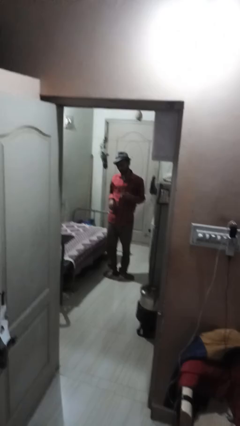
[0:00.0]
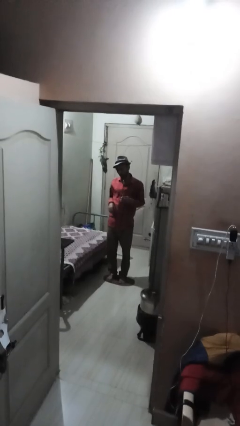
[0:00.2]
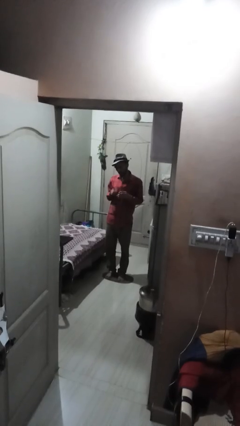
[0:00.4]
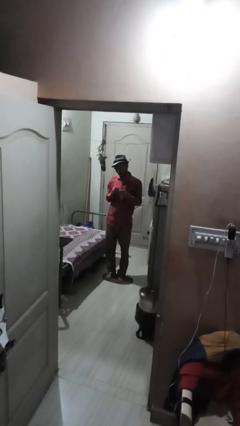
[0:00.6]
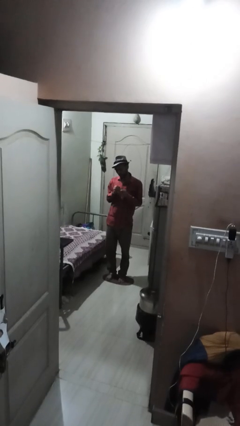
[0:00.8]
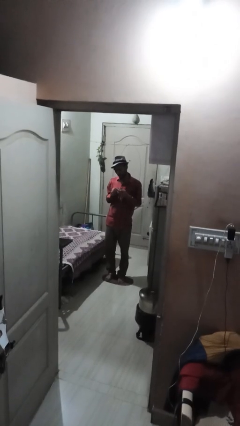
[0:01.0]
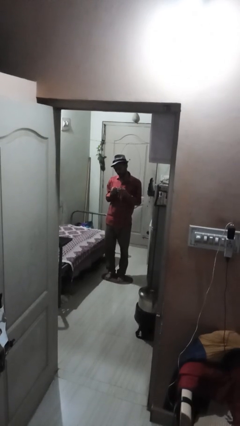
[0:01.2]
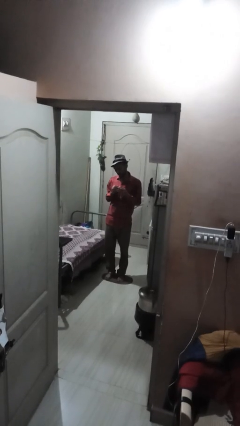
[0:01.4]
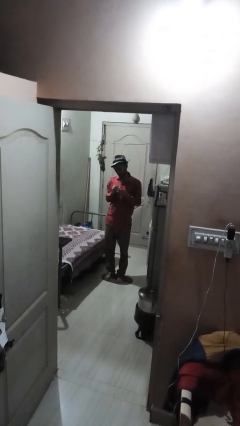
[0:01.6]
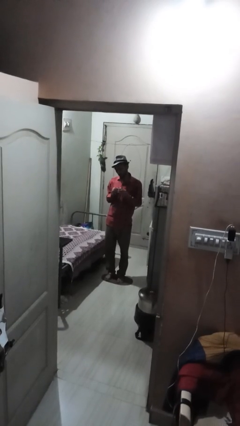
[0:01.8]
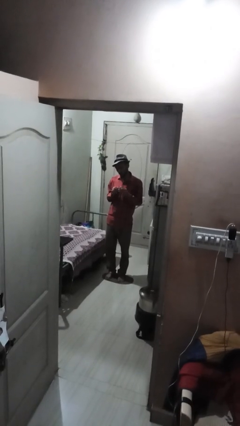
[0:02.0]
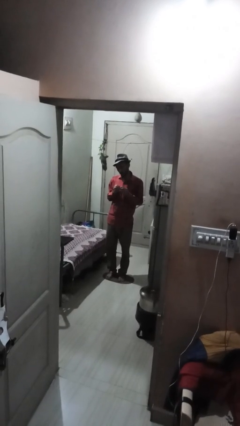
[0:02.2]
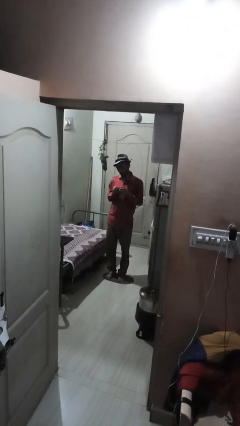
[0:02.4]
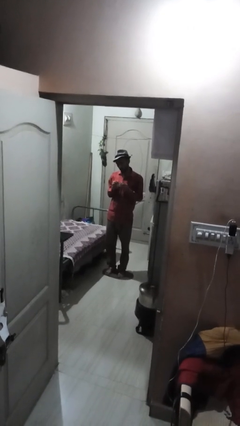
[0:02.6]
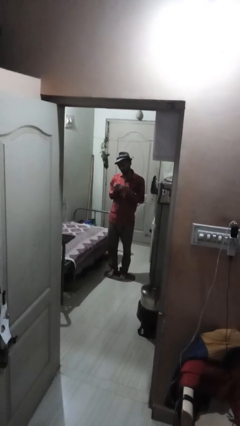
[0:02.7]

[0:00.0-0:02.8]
person files fingernails

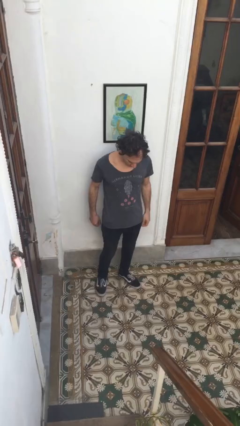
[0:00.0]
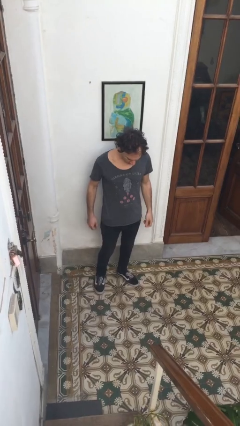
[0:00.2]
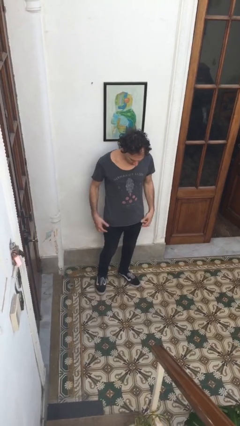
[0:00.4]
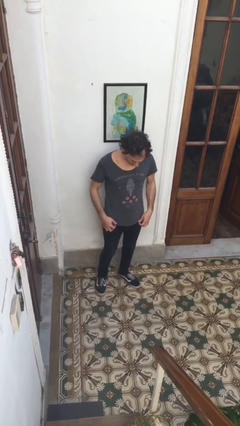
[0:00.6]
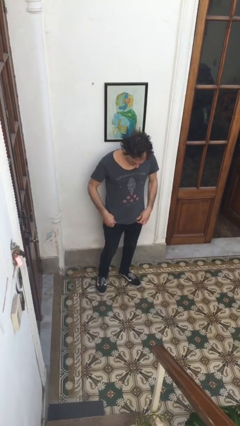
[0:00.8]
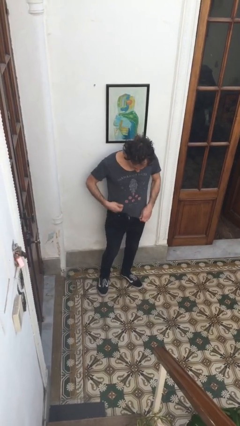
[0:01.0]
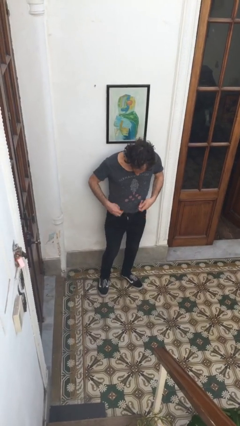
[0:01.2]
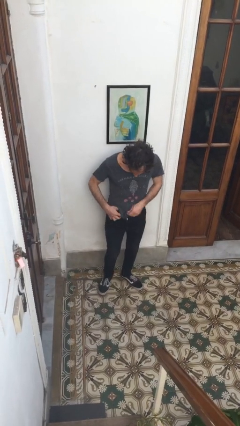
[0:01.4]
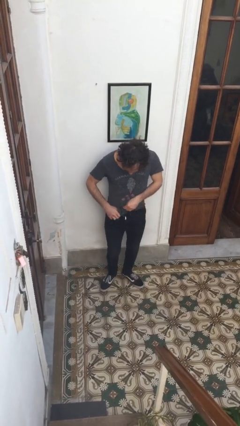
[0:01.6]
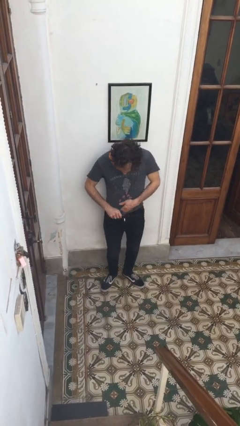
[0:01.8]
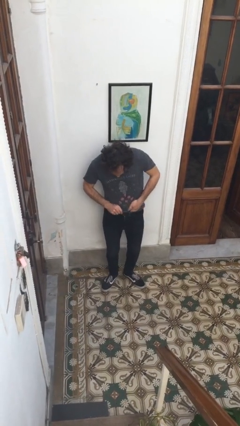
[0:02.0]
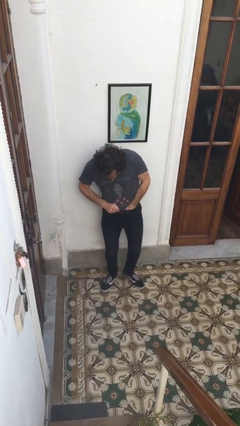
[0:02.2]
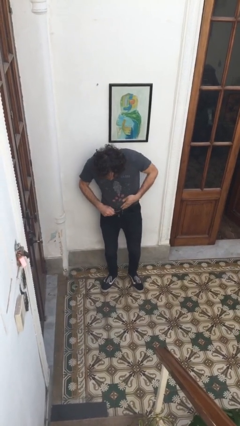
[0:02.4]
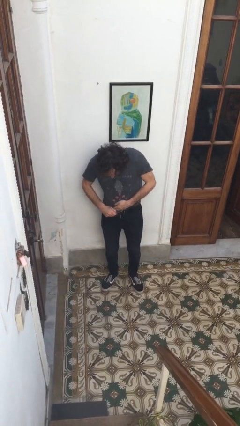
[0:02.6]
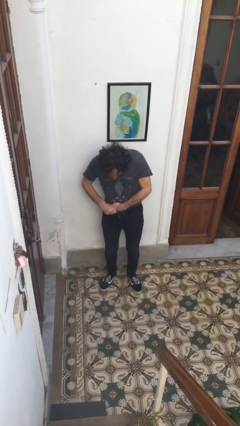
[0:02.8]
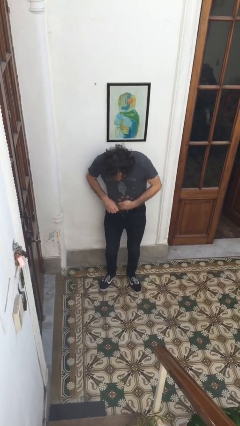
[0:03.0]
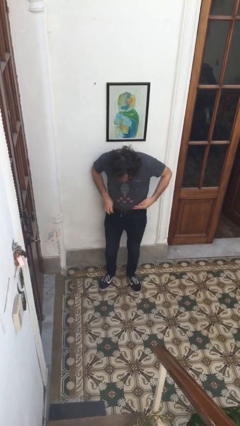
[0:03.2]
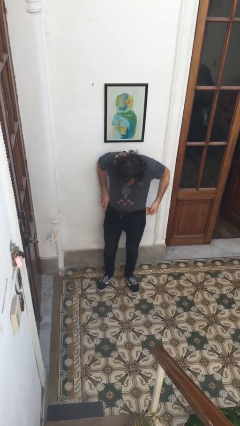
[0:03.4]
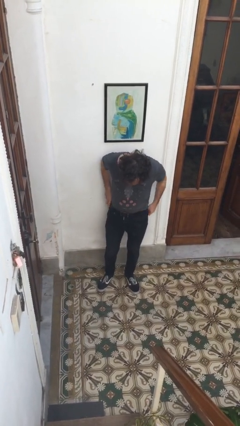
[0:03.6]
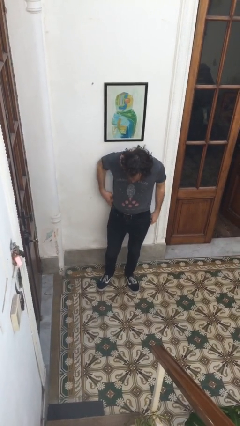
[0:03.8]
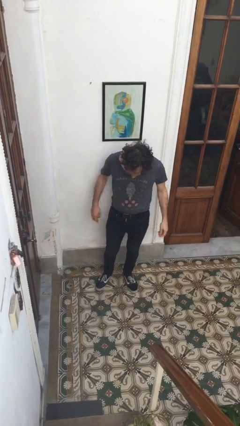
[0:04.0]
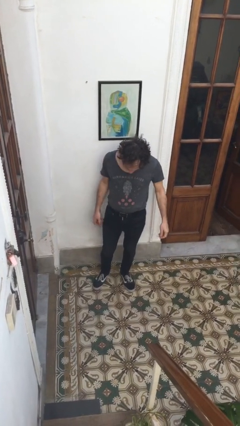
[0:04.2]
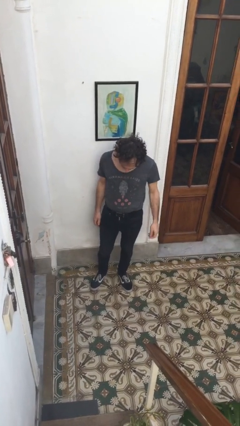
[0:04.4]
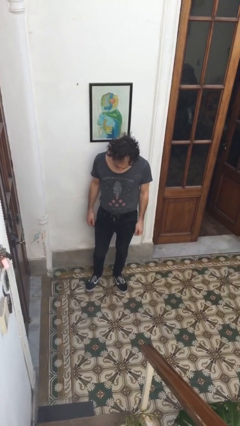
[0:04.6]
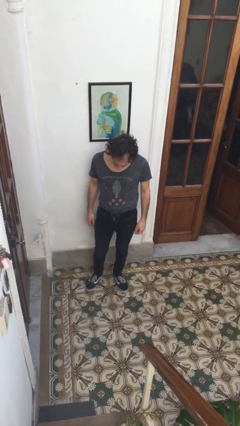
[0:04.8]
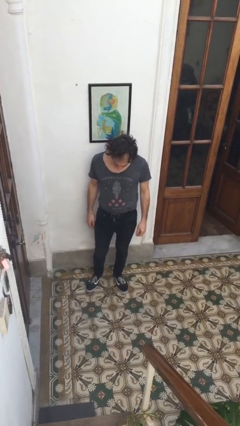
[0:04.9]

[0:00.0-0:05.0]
person tucks in shirt

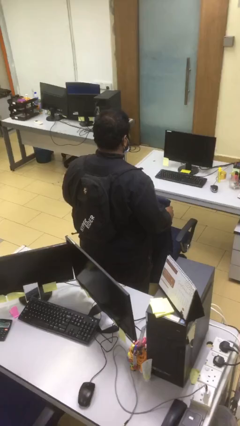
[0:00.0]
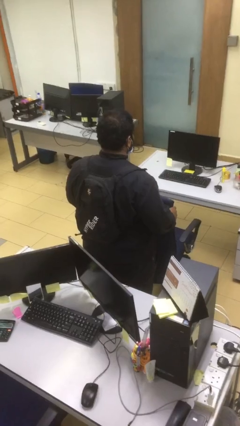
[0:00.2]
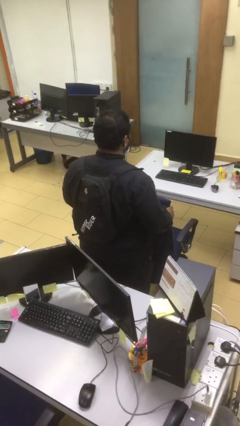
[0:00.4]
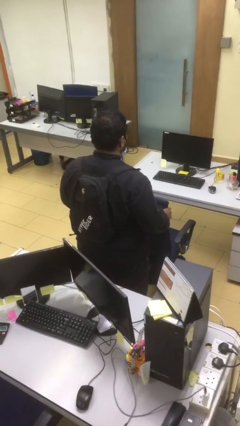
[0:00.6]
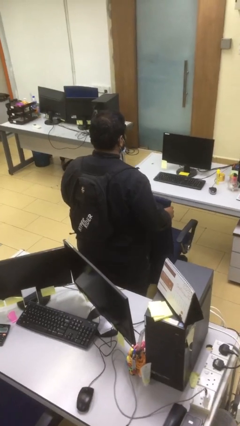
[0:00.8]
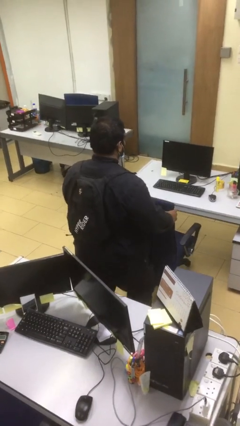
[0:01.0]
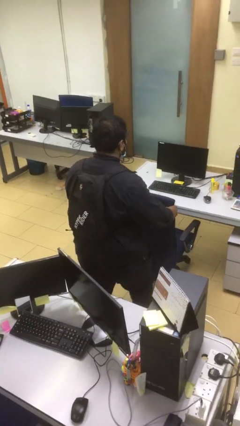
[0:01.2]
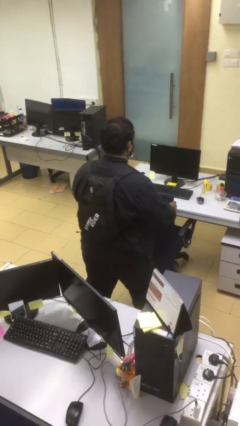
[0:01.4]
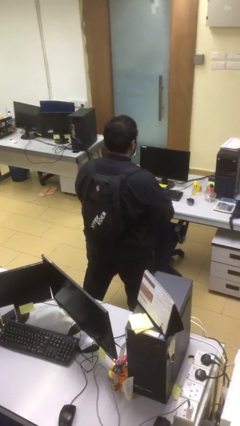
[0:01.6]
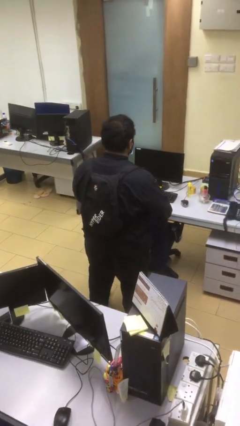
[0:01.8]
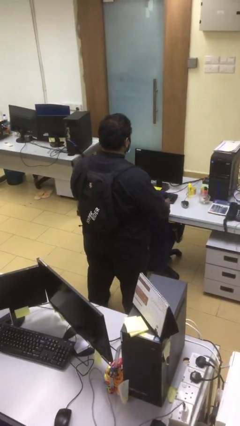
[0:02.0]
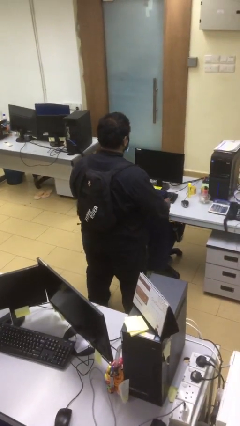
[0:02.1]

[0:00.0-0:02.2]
person pushes in chair

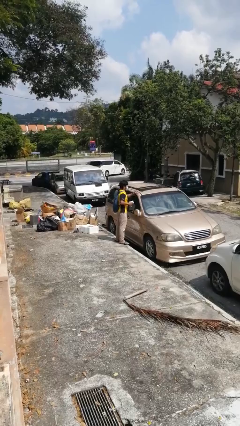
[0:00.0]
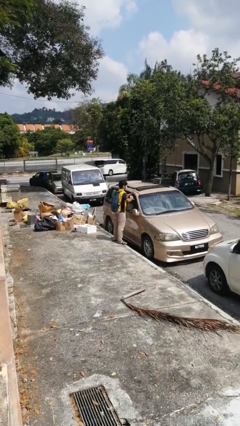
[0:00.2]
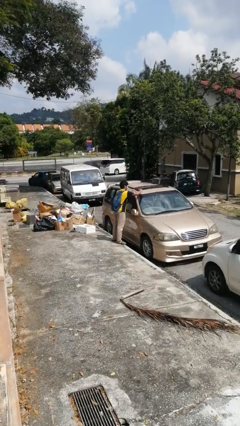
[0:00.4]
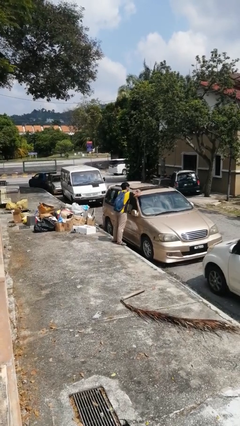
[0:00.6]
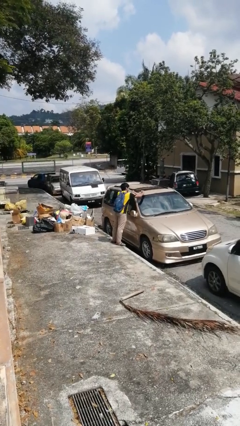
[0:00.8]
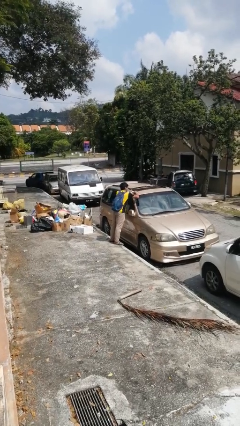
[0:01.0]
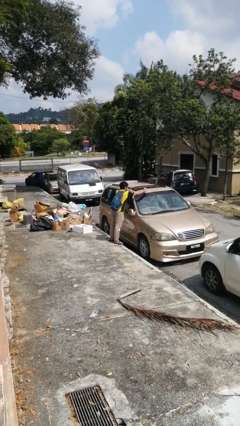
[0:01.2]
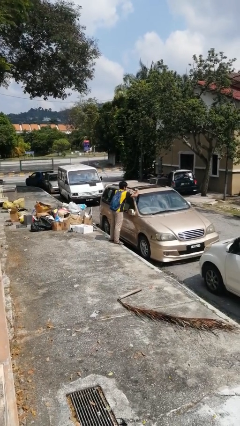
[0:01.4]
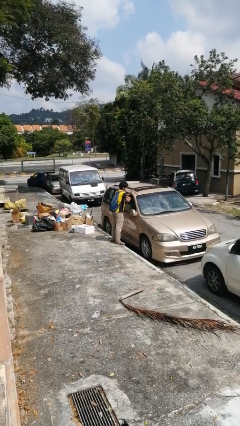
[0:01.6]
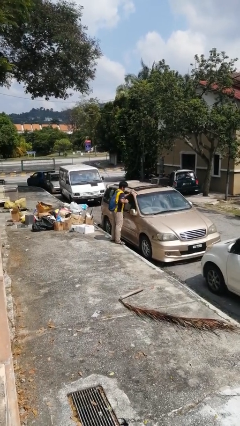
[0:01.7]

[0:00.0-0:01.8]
person polishes car with rag

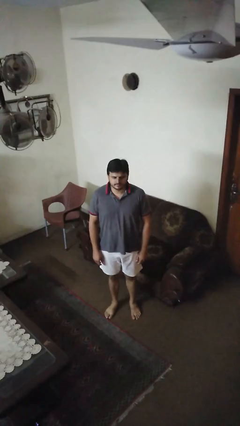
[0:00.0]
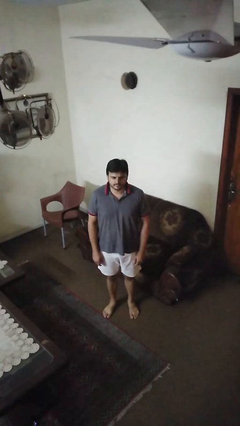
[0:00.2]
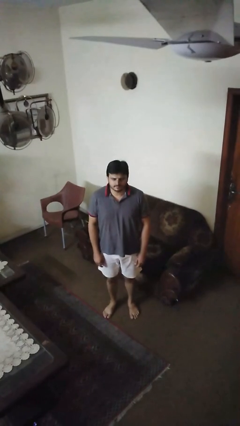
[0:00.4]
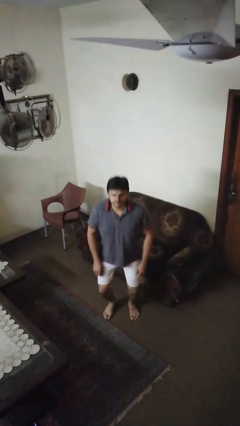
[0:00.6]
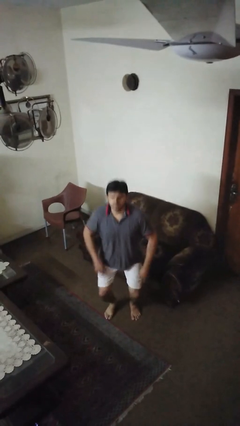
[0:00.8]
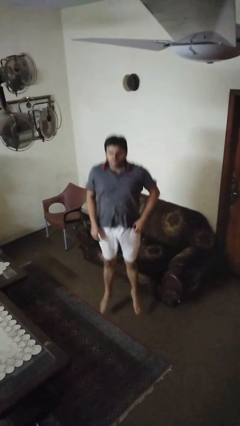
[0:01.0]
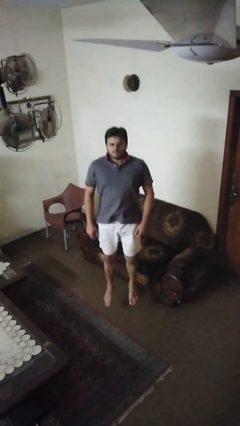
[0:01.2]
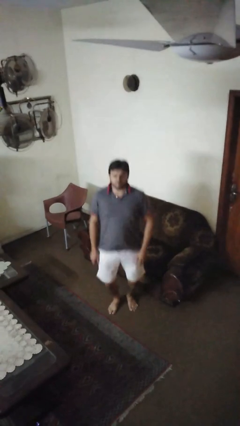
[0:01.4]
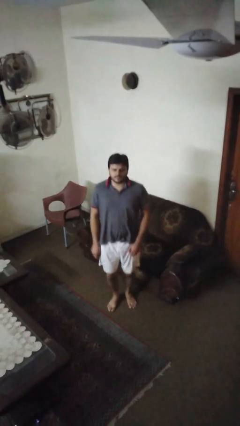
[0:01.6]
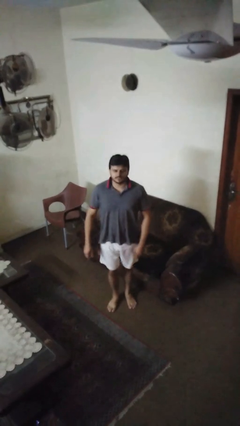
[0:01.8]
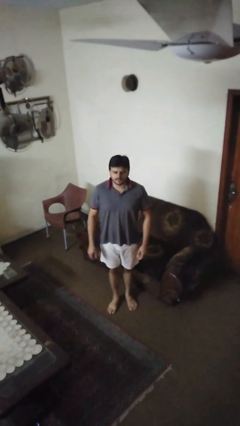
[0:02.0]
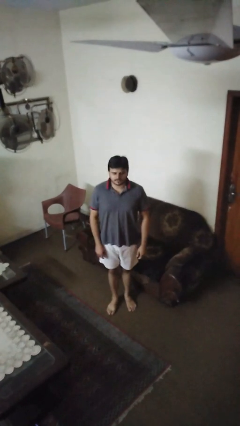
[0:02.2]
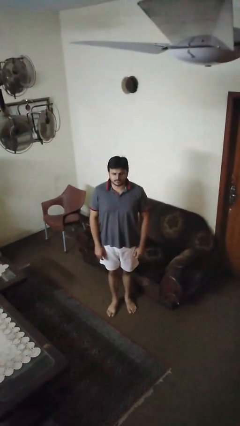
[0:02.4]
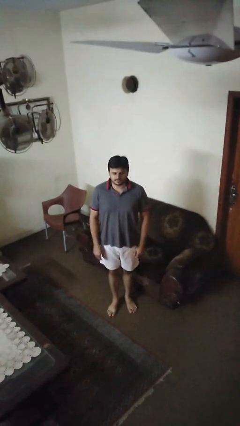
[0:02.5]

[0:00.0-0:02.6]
person jumps

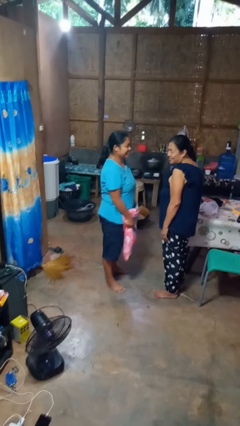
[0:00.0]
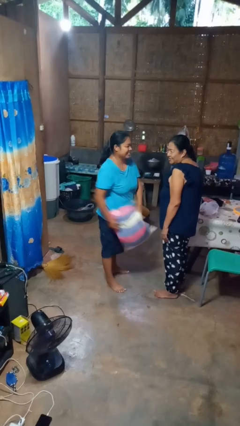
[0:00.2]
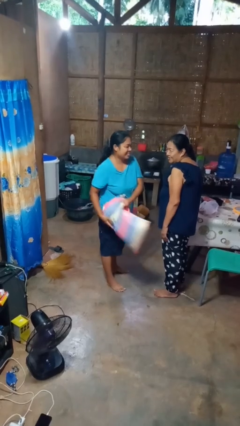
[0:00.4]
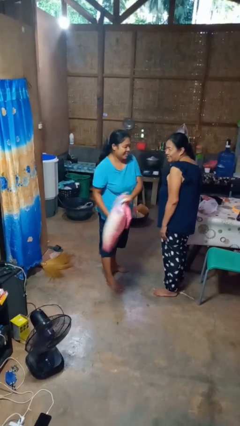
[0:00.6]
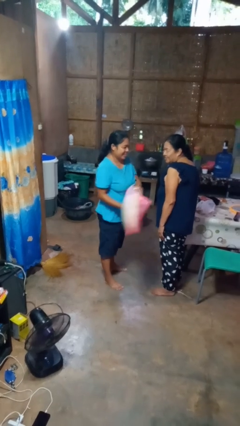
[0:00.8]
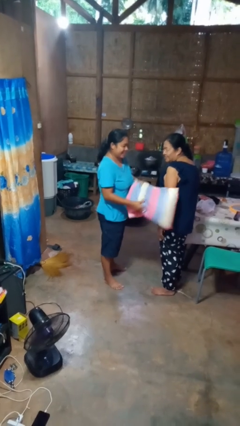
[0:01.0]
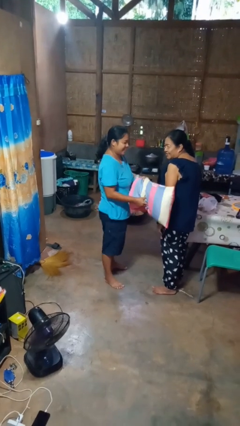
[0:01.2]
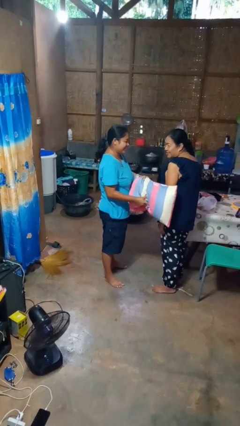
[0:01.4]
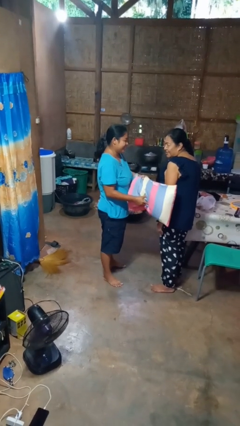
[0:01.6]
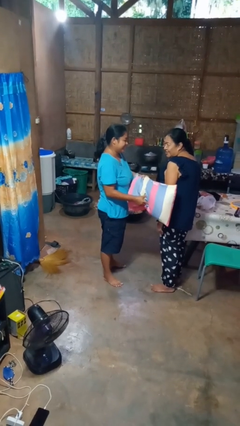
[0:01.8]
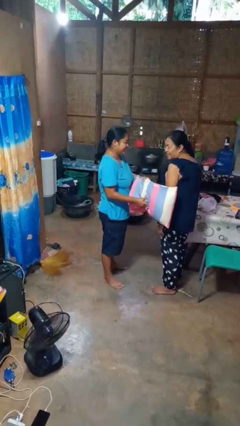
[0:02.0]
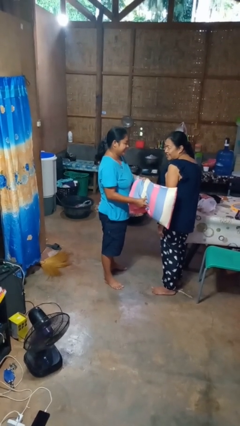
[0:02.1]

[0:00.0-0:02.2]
person hits person with pillow

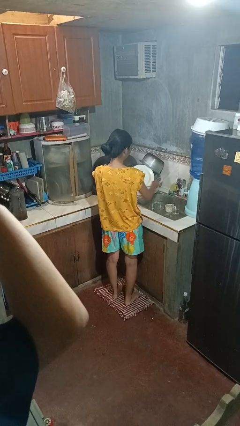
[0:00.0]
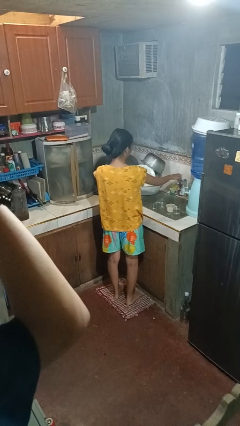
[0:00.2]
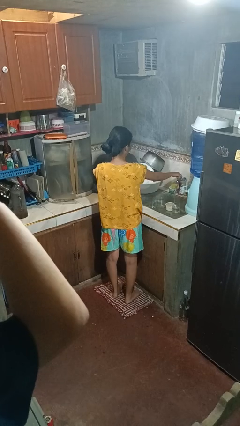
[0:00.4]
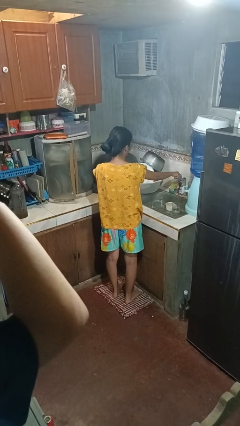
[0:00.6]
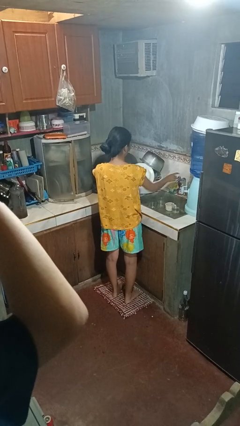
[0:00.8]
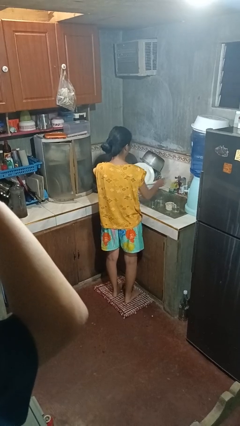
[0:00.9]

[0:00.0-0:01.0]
person turns off faucet
